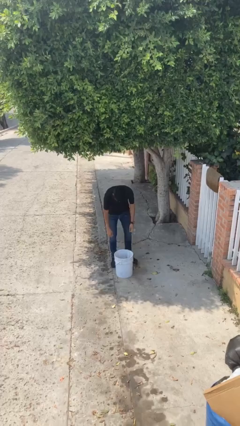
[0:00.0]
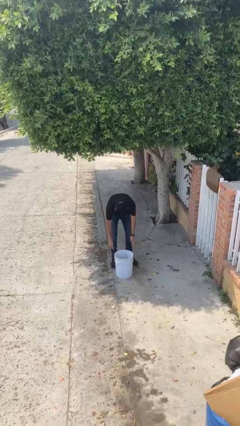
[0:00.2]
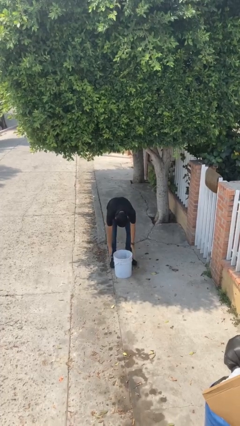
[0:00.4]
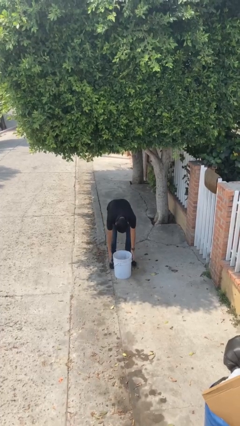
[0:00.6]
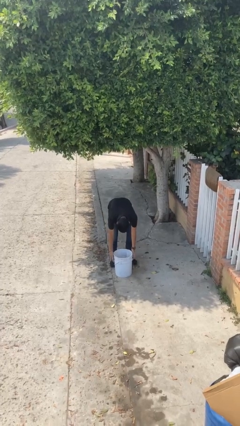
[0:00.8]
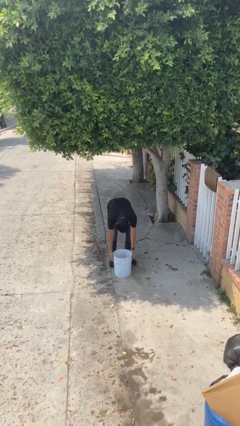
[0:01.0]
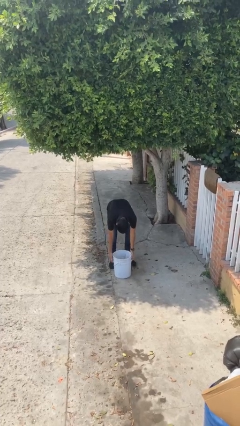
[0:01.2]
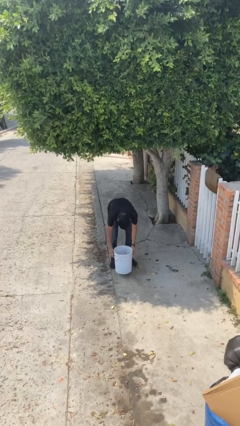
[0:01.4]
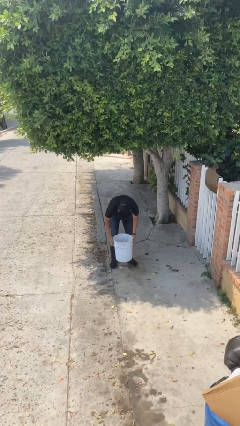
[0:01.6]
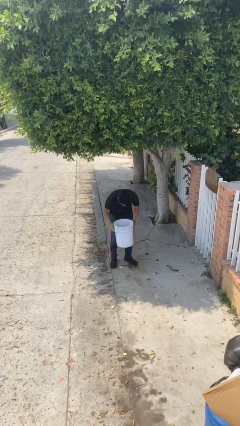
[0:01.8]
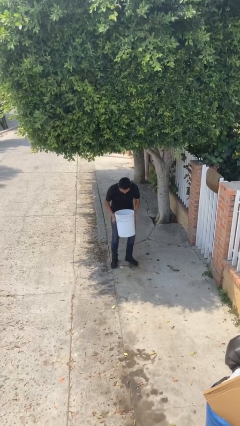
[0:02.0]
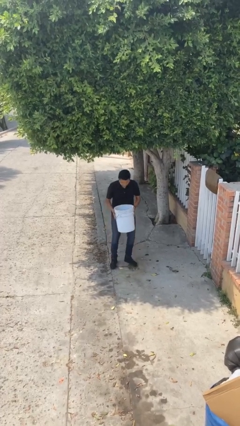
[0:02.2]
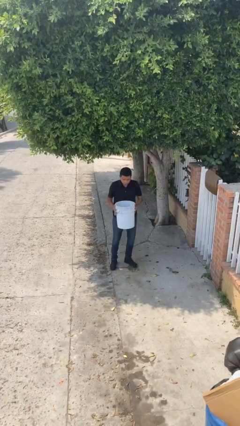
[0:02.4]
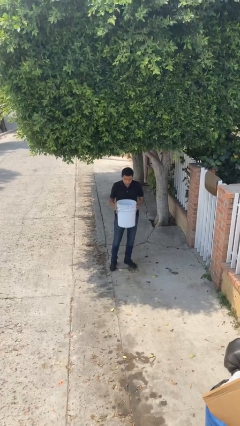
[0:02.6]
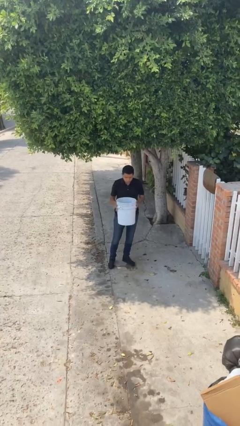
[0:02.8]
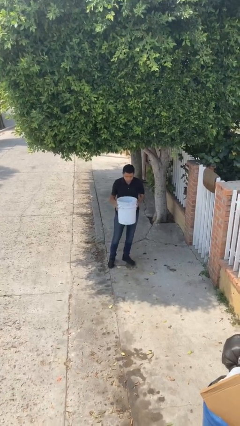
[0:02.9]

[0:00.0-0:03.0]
person picks up object from floor

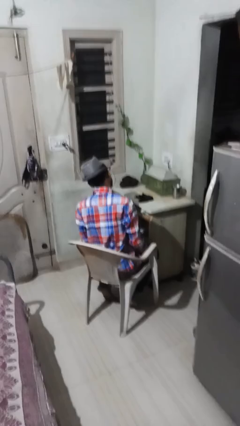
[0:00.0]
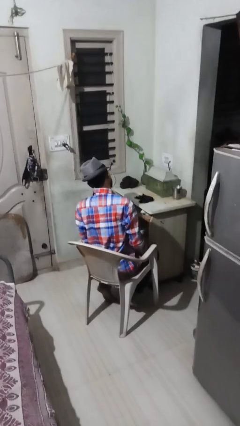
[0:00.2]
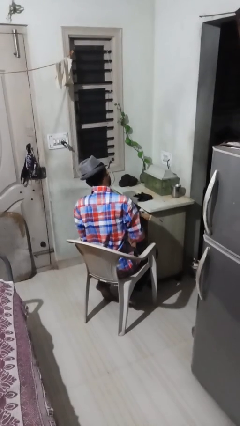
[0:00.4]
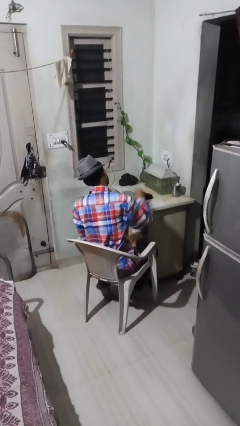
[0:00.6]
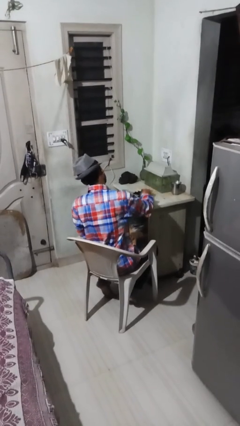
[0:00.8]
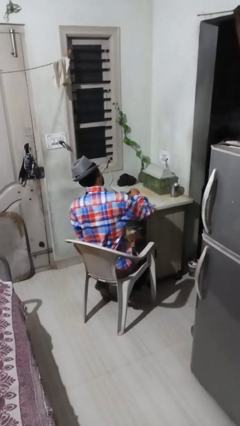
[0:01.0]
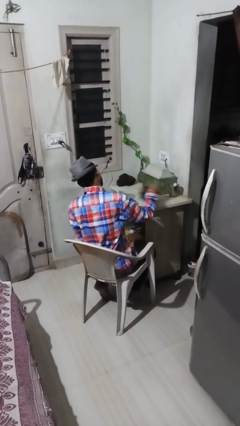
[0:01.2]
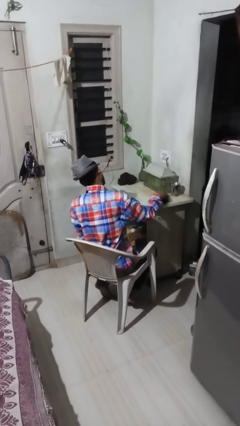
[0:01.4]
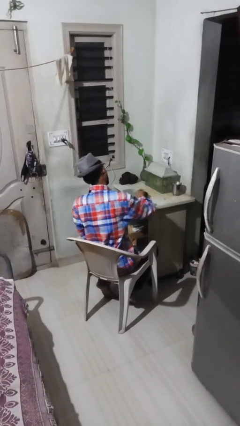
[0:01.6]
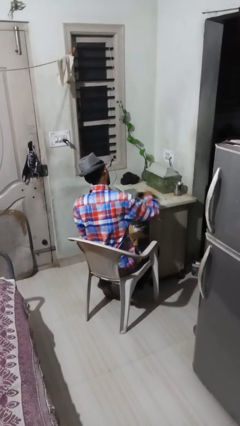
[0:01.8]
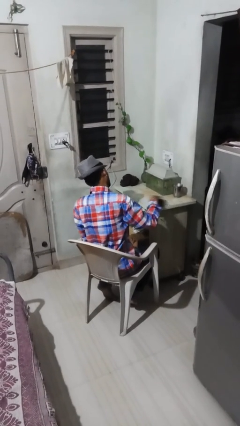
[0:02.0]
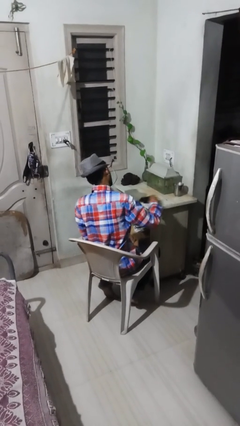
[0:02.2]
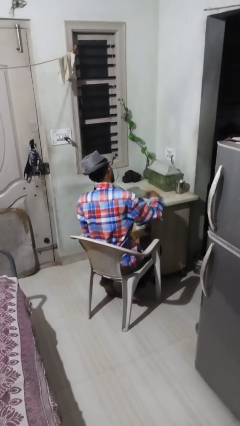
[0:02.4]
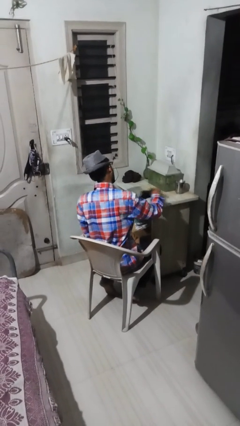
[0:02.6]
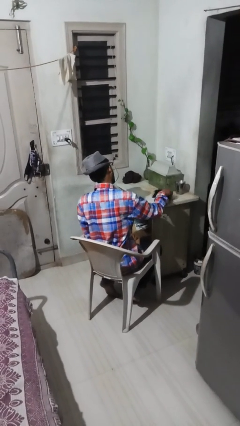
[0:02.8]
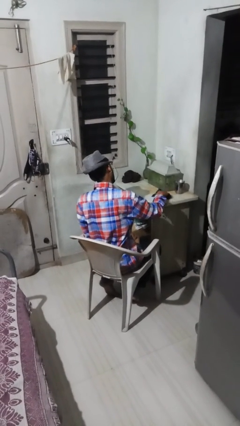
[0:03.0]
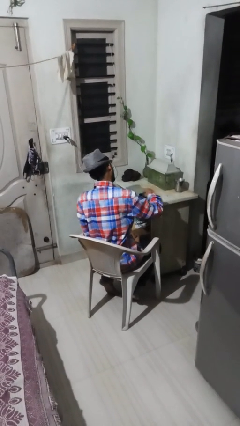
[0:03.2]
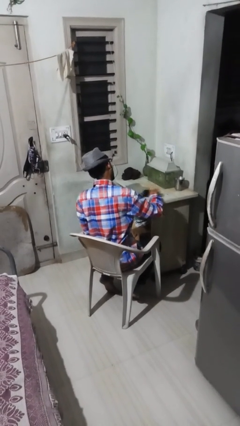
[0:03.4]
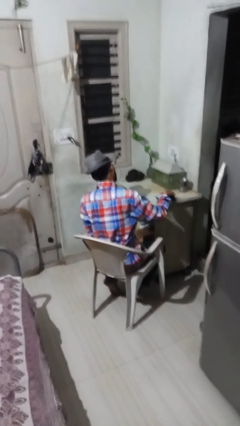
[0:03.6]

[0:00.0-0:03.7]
person cleans table with rag

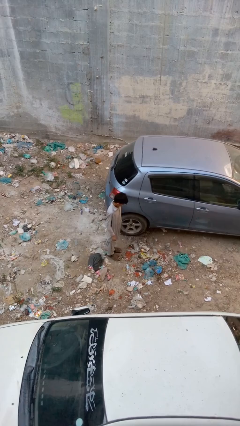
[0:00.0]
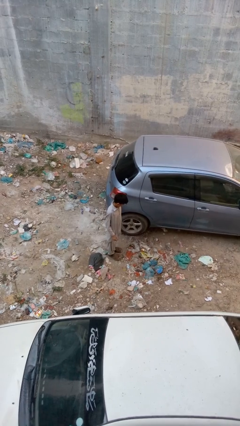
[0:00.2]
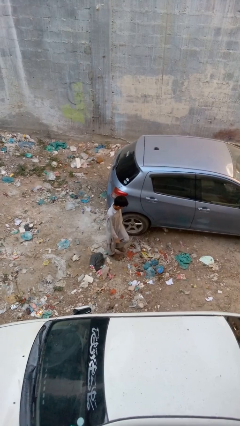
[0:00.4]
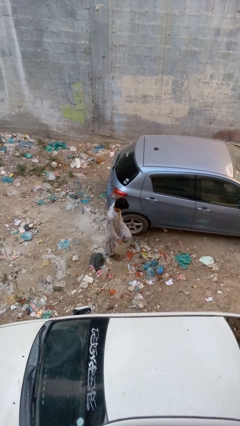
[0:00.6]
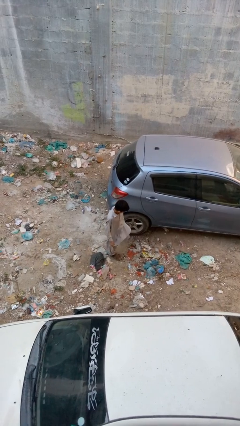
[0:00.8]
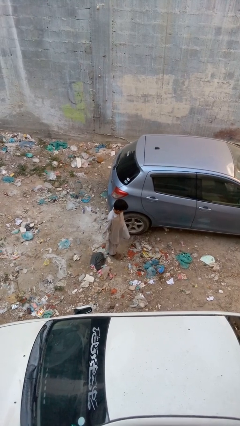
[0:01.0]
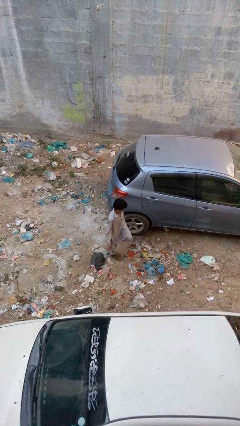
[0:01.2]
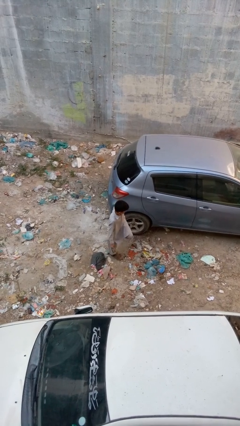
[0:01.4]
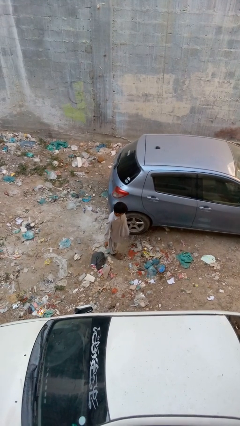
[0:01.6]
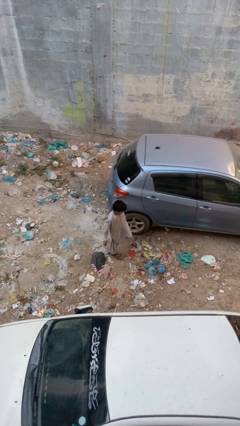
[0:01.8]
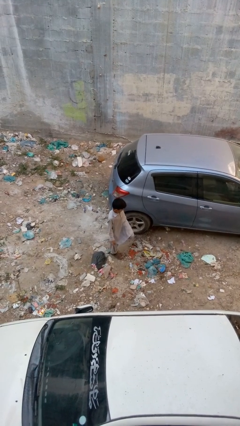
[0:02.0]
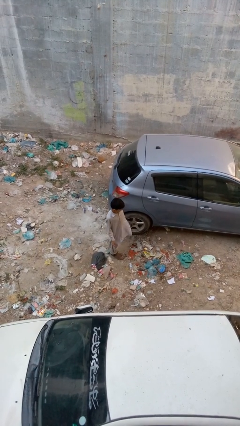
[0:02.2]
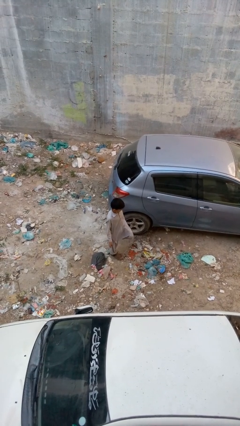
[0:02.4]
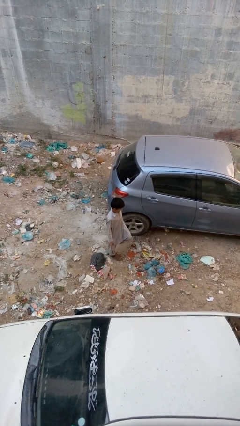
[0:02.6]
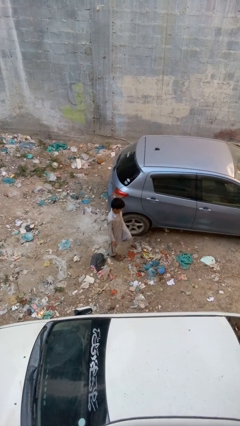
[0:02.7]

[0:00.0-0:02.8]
person kicks car tires

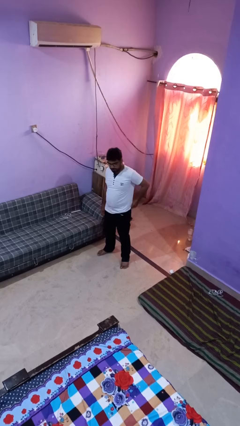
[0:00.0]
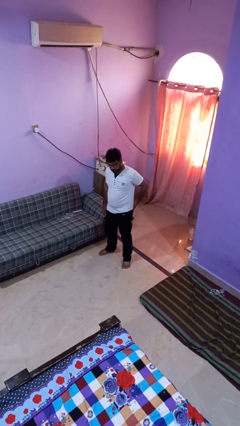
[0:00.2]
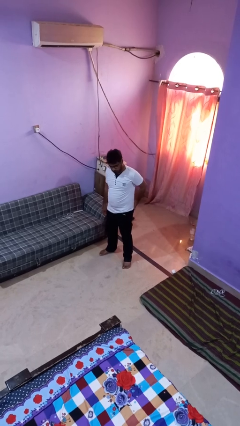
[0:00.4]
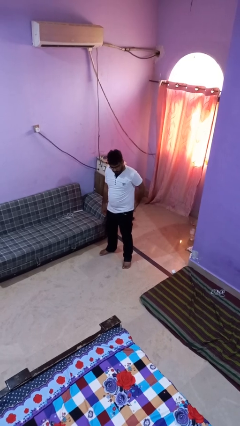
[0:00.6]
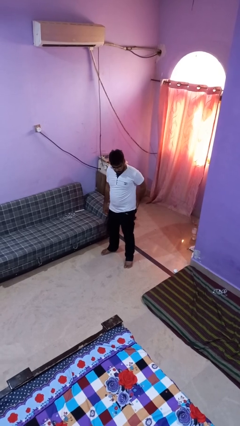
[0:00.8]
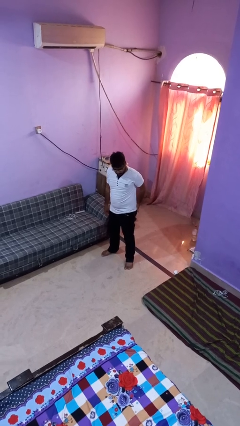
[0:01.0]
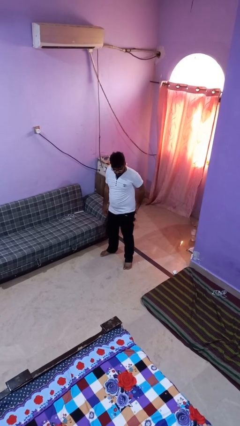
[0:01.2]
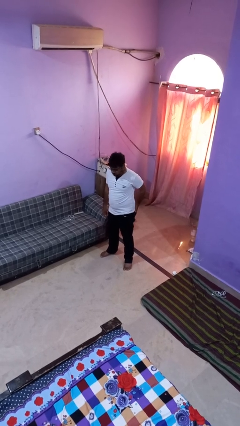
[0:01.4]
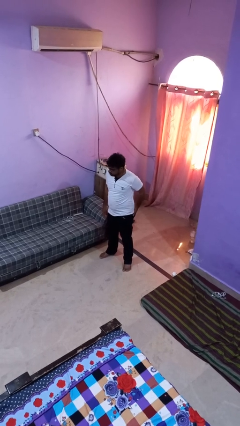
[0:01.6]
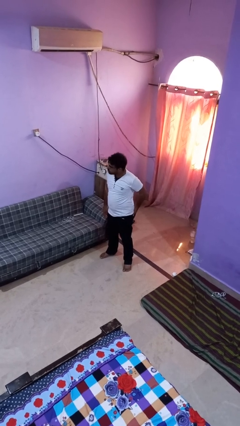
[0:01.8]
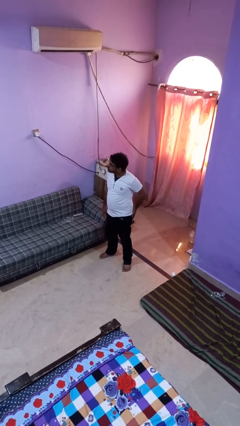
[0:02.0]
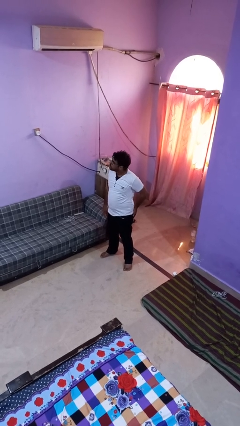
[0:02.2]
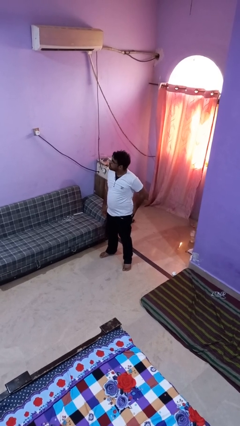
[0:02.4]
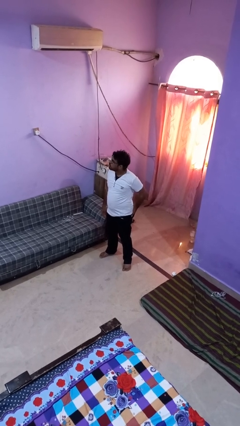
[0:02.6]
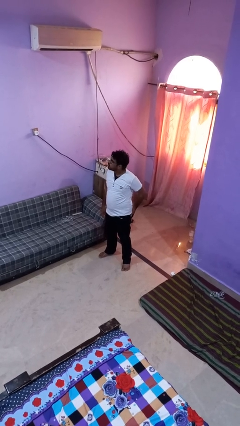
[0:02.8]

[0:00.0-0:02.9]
person puts hands in back pockets

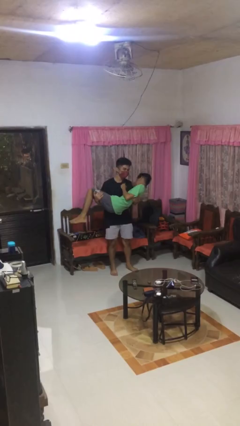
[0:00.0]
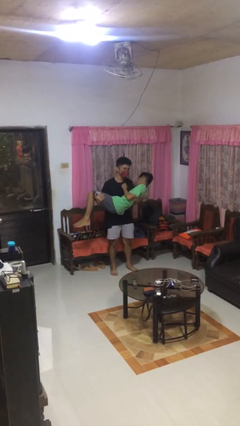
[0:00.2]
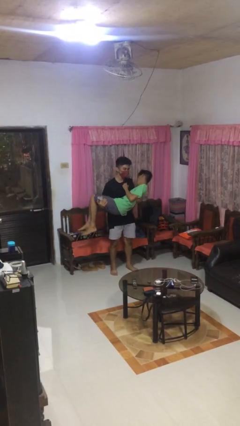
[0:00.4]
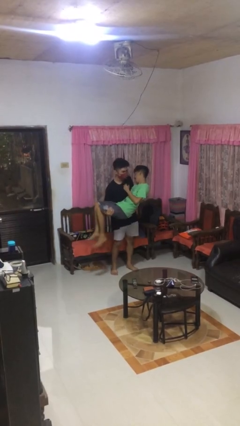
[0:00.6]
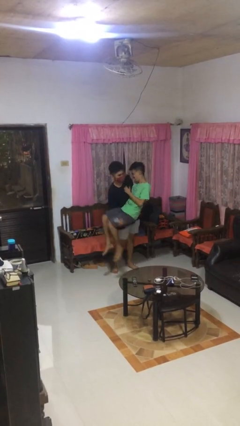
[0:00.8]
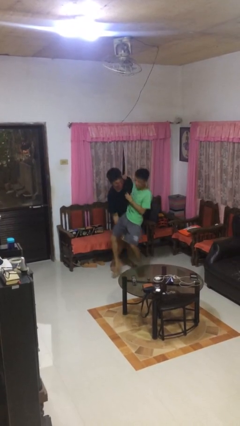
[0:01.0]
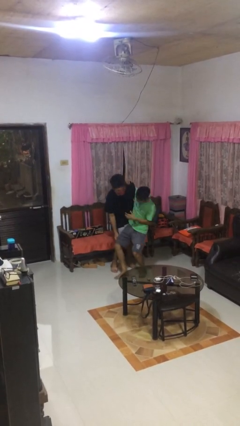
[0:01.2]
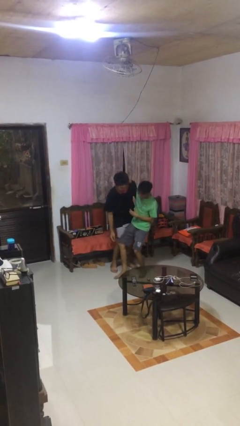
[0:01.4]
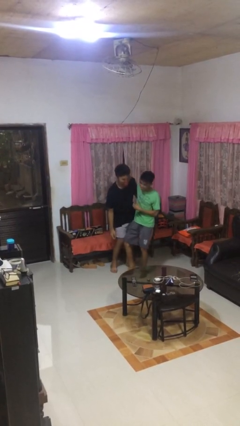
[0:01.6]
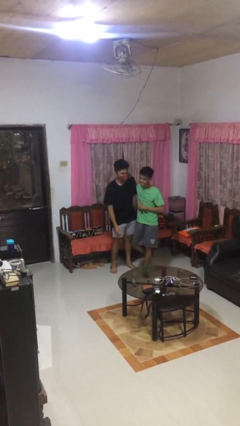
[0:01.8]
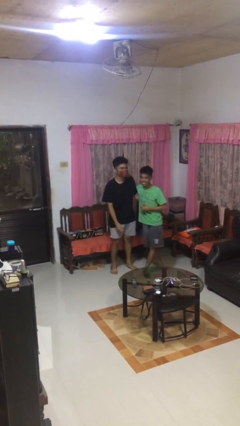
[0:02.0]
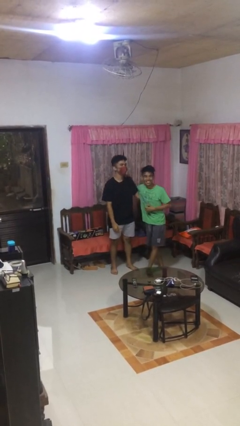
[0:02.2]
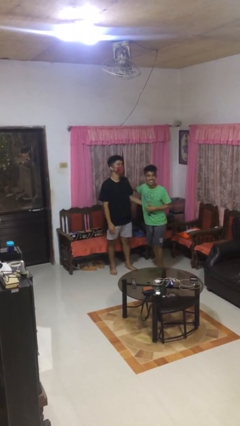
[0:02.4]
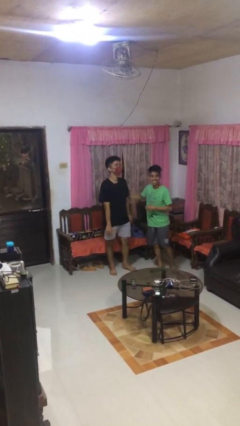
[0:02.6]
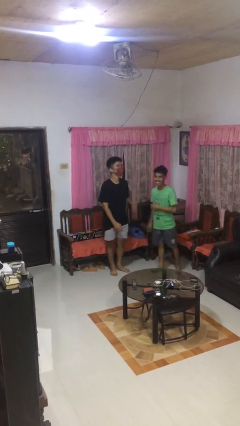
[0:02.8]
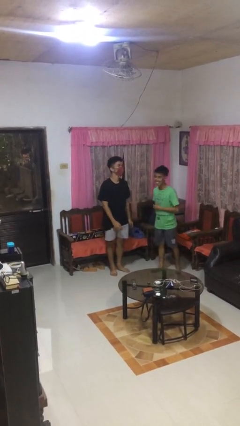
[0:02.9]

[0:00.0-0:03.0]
person puts down person

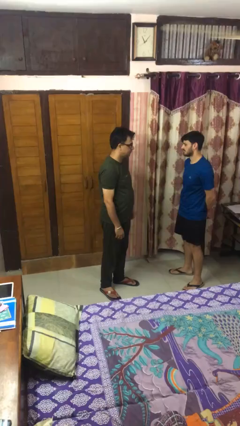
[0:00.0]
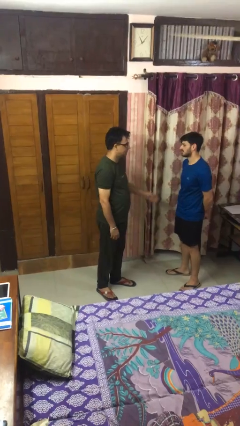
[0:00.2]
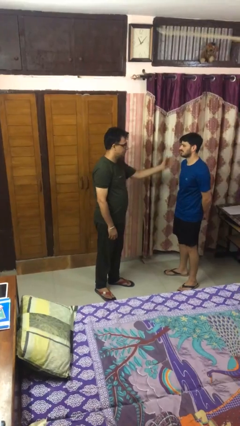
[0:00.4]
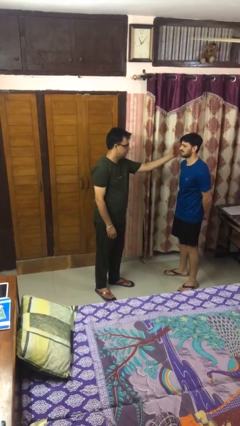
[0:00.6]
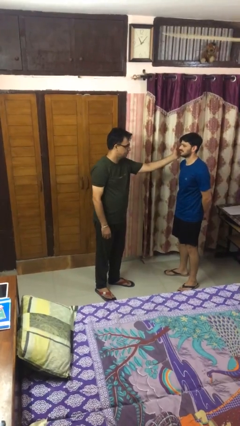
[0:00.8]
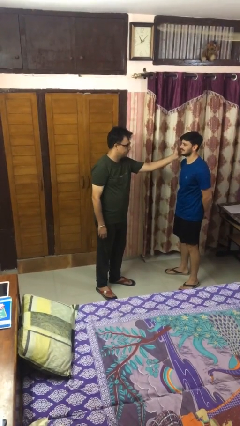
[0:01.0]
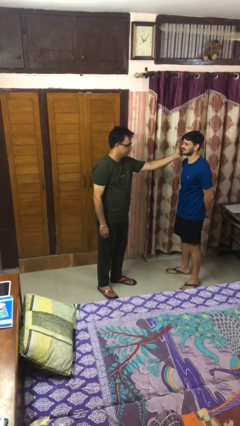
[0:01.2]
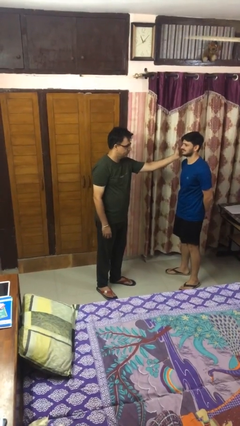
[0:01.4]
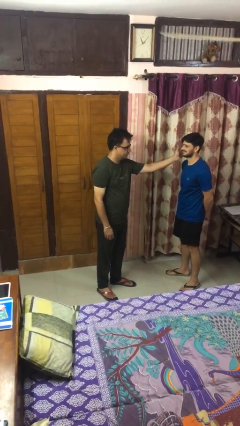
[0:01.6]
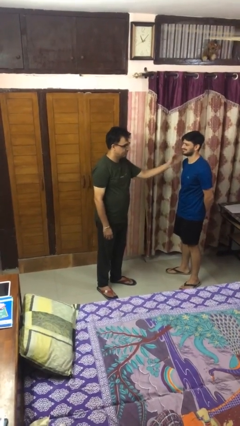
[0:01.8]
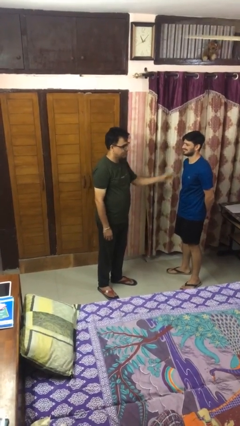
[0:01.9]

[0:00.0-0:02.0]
person touches face of person

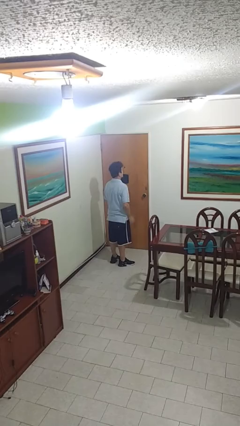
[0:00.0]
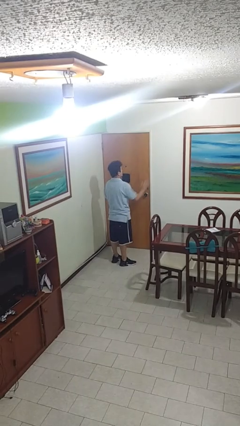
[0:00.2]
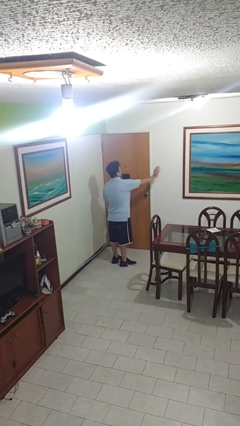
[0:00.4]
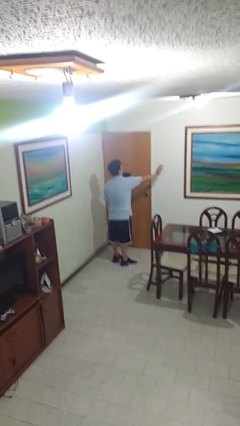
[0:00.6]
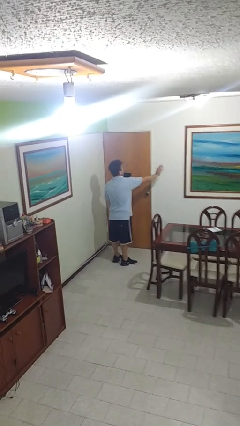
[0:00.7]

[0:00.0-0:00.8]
person gestures stop
